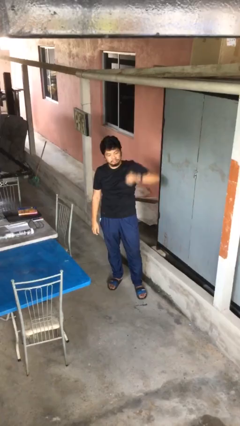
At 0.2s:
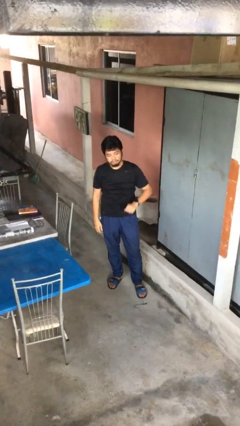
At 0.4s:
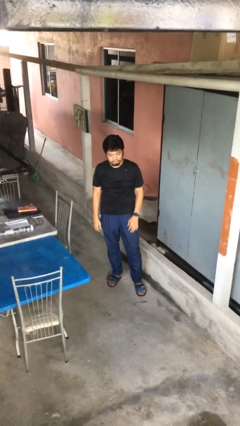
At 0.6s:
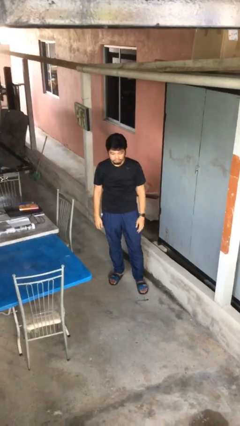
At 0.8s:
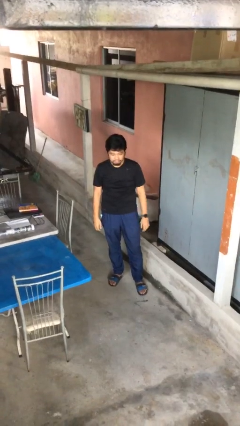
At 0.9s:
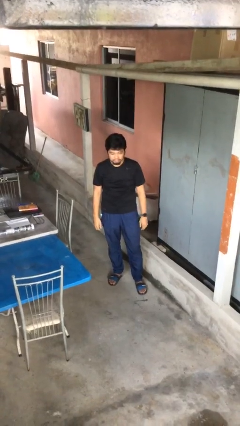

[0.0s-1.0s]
person gestures lower hand

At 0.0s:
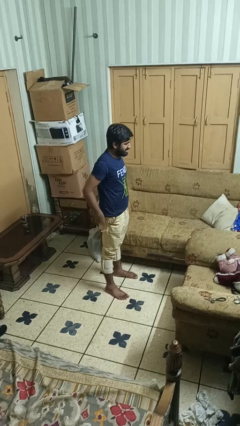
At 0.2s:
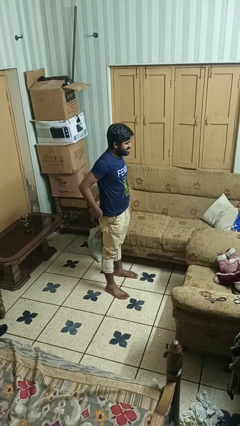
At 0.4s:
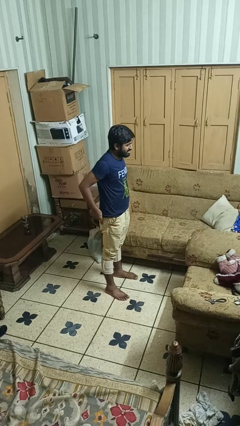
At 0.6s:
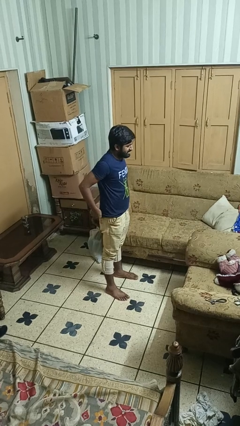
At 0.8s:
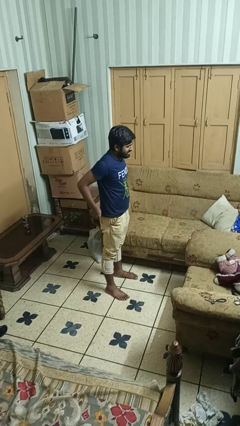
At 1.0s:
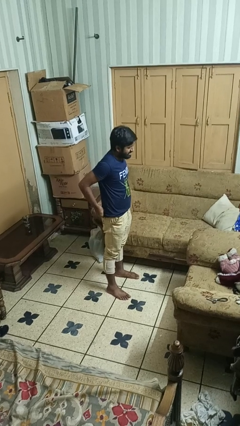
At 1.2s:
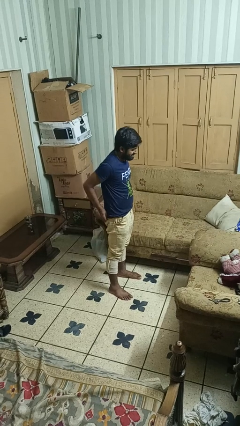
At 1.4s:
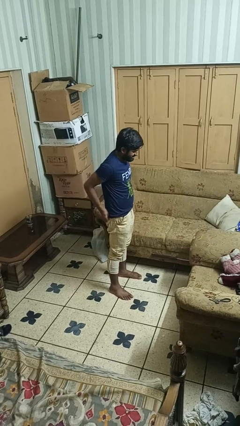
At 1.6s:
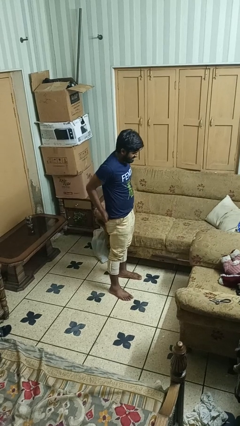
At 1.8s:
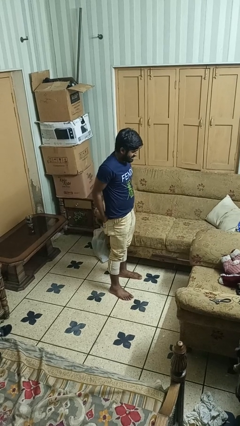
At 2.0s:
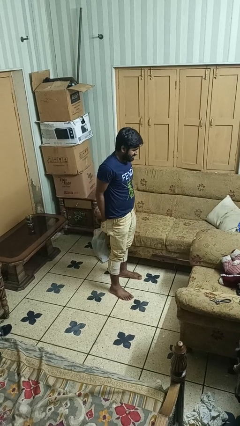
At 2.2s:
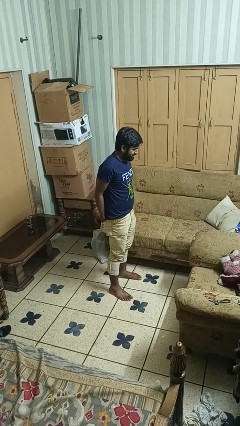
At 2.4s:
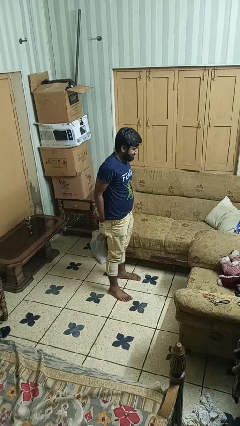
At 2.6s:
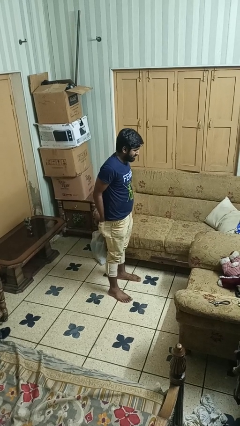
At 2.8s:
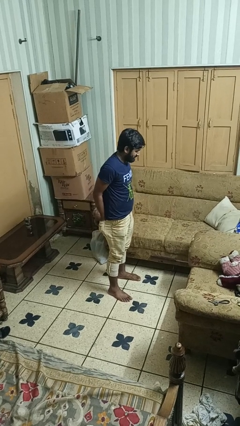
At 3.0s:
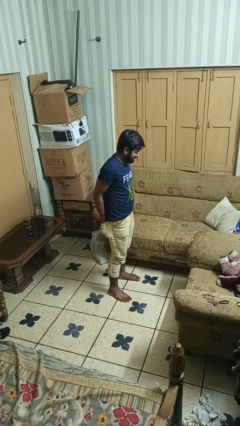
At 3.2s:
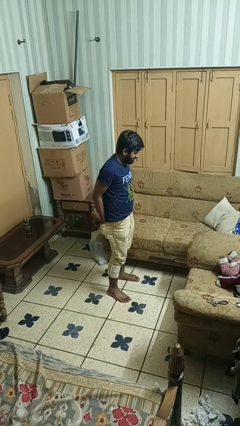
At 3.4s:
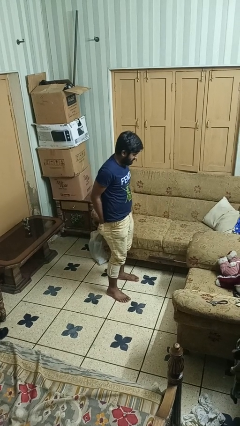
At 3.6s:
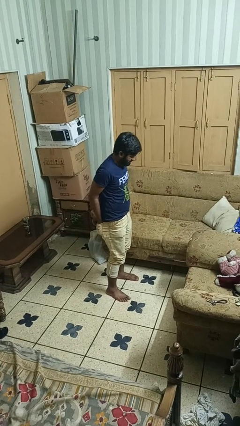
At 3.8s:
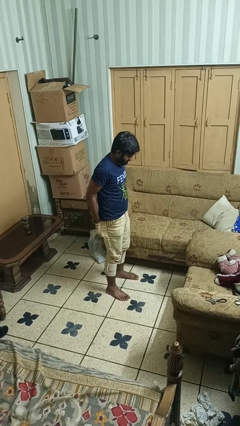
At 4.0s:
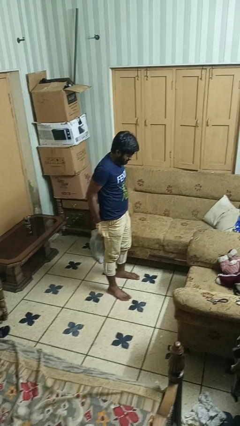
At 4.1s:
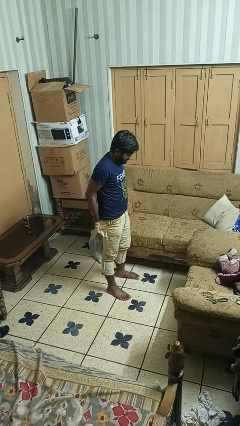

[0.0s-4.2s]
person puts hands in back pockets

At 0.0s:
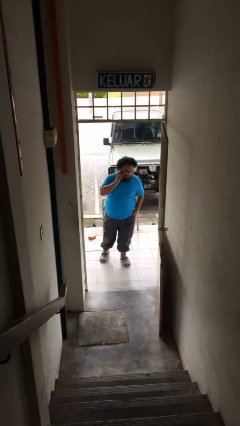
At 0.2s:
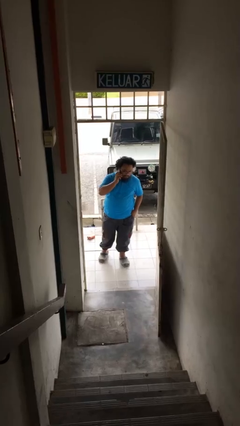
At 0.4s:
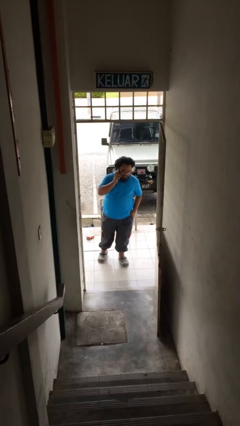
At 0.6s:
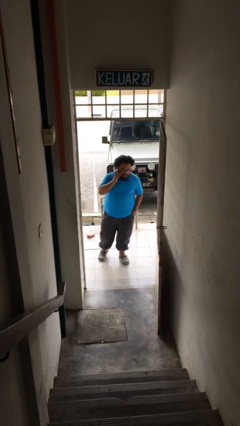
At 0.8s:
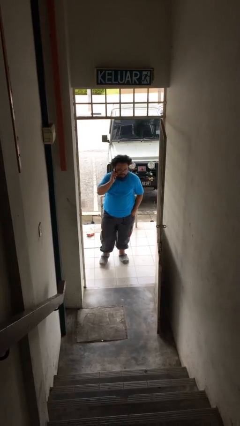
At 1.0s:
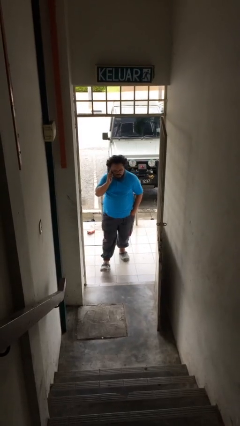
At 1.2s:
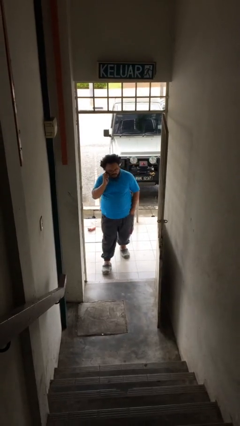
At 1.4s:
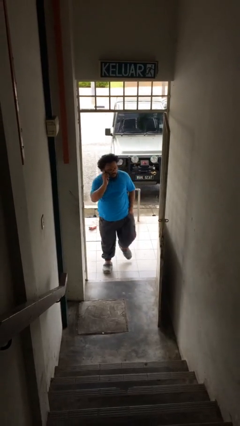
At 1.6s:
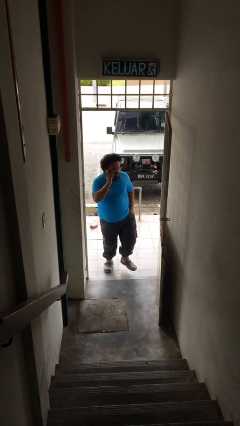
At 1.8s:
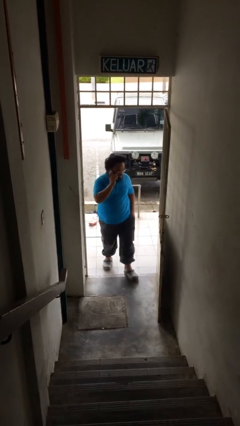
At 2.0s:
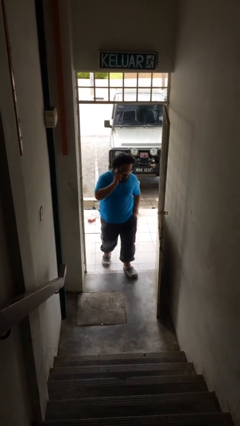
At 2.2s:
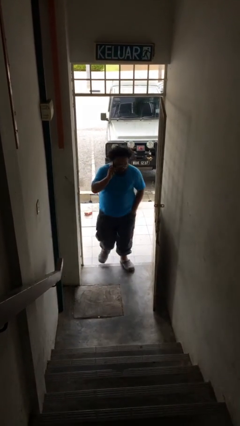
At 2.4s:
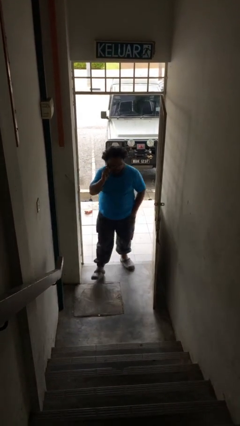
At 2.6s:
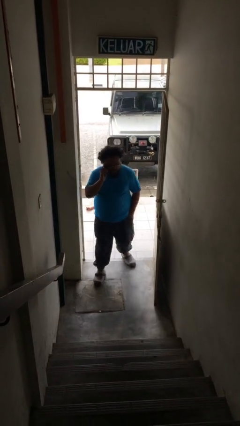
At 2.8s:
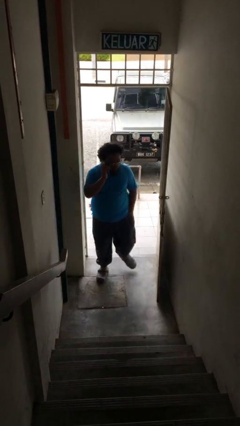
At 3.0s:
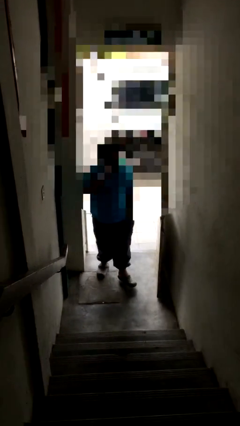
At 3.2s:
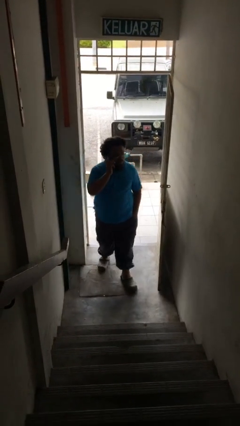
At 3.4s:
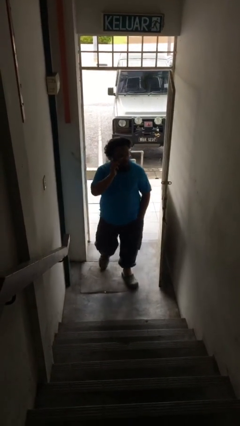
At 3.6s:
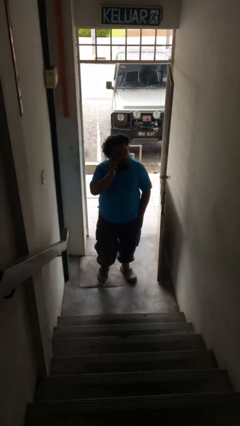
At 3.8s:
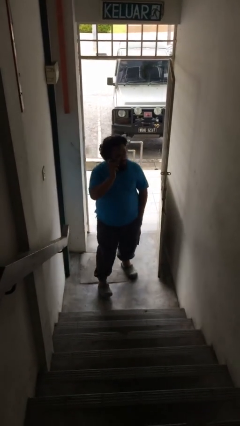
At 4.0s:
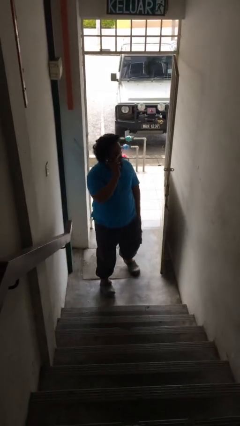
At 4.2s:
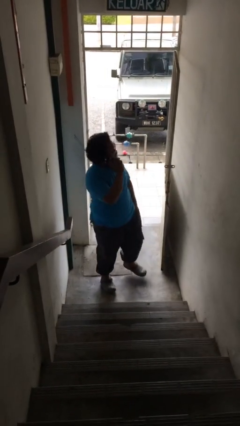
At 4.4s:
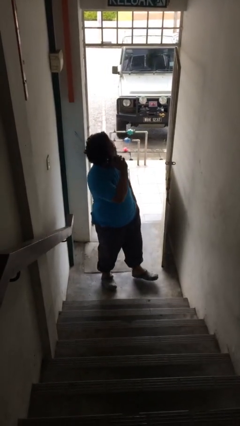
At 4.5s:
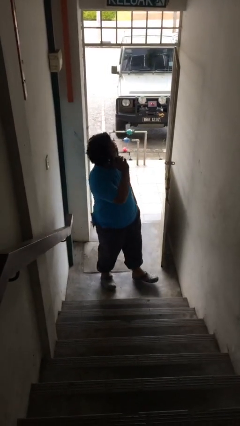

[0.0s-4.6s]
person enters scene through structure

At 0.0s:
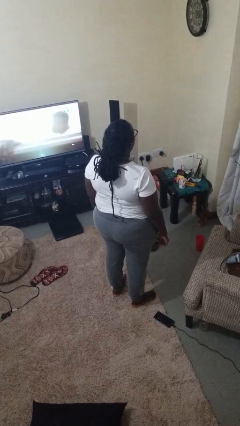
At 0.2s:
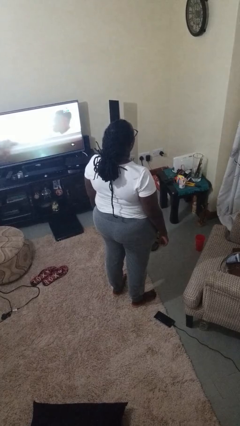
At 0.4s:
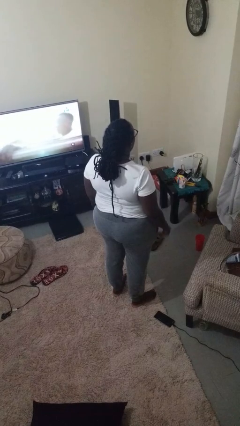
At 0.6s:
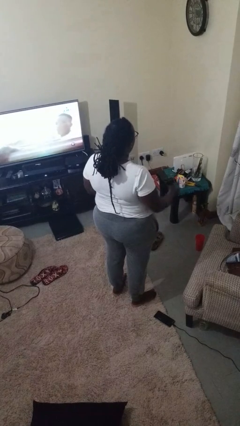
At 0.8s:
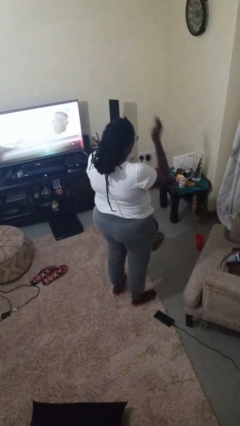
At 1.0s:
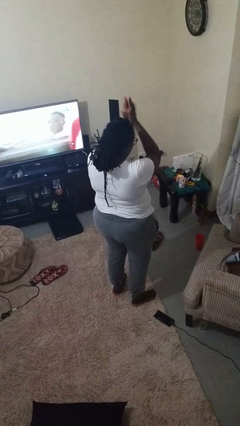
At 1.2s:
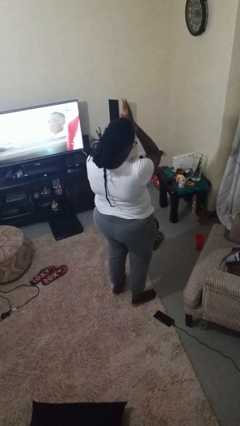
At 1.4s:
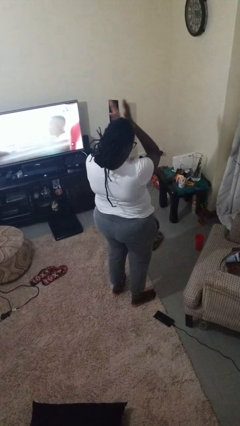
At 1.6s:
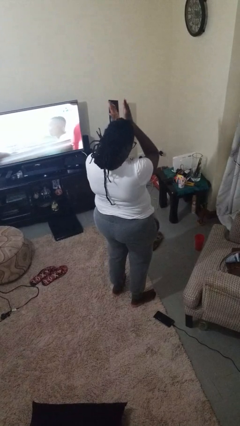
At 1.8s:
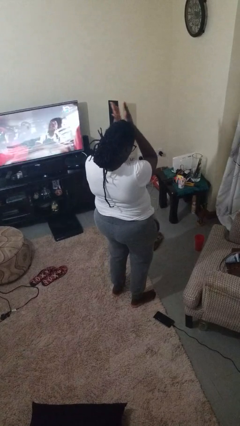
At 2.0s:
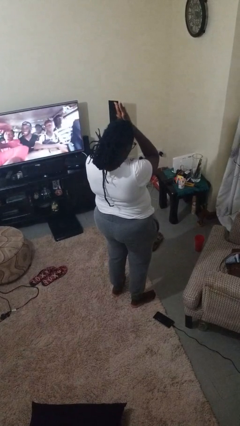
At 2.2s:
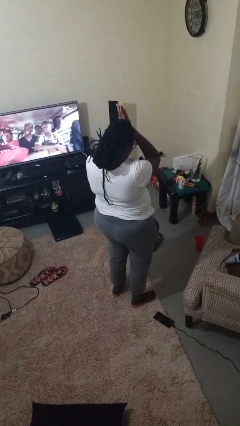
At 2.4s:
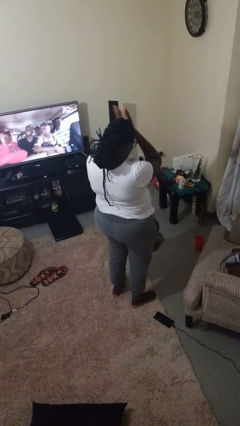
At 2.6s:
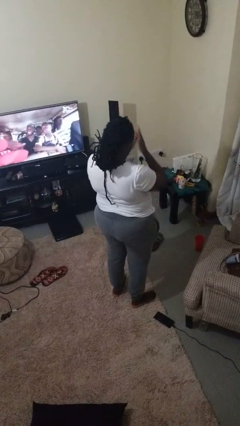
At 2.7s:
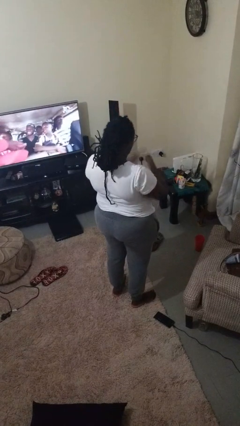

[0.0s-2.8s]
person claps hands

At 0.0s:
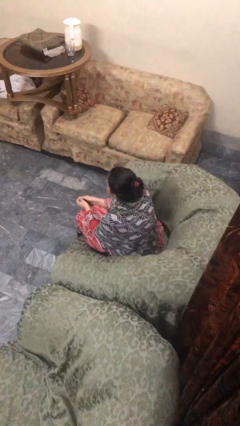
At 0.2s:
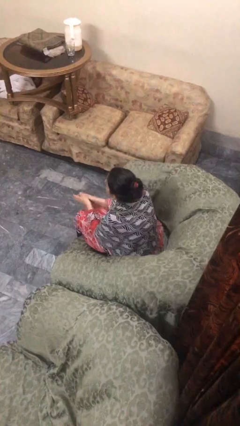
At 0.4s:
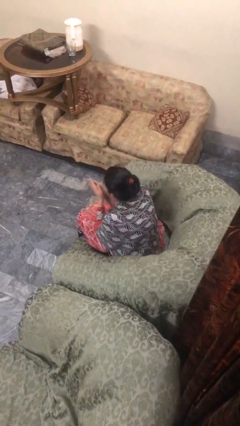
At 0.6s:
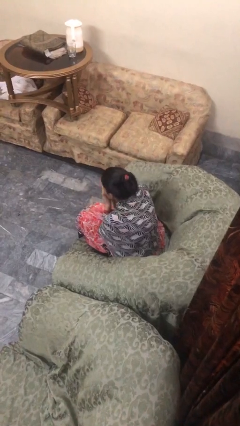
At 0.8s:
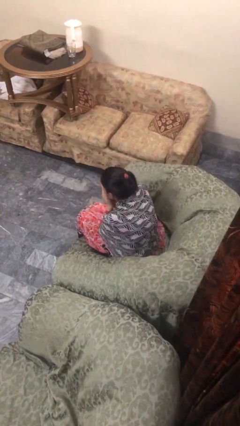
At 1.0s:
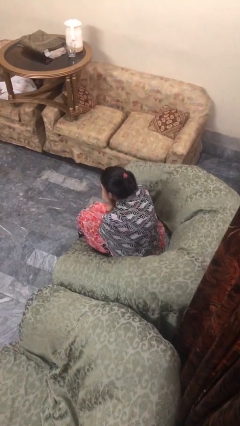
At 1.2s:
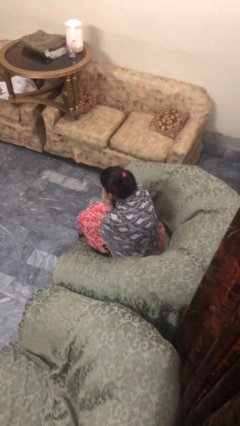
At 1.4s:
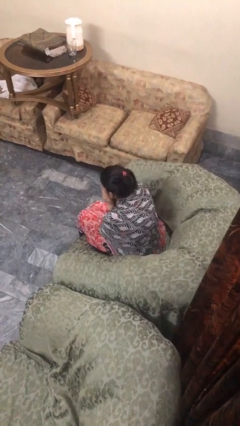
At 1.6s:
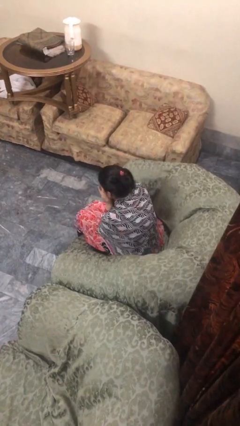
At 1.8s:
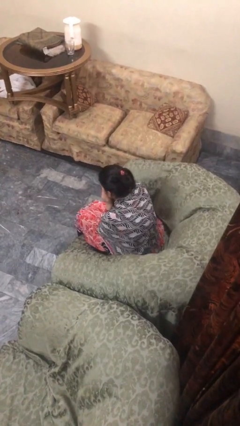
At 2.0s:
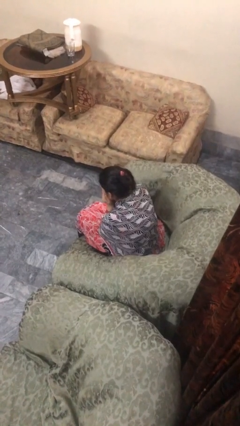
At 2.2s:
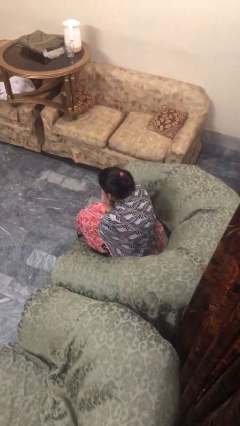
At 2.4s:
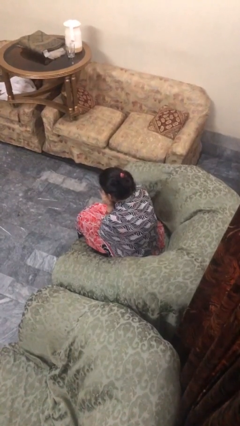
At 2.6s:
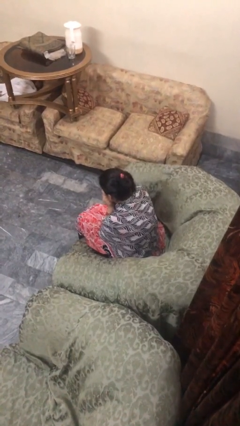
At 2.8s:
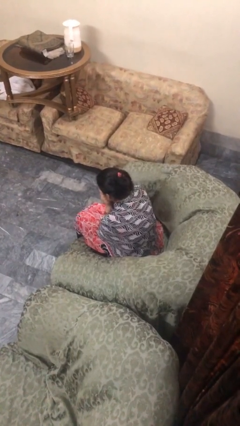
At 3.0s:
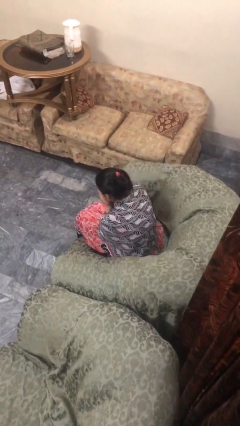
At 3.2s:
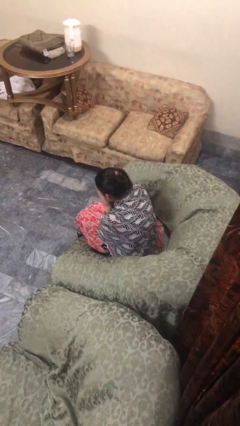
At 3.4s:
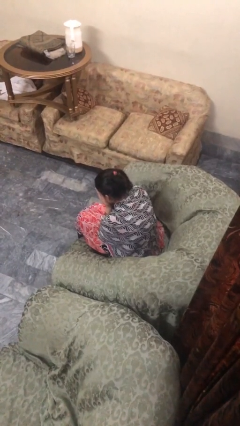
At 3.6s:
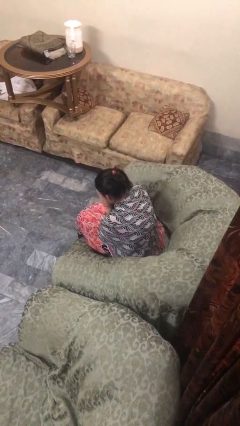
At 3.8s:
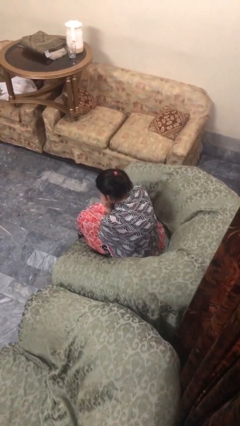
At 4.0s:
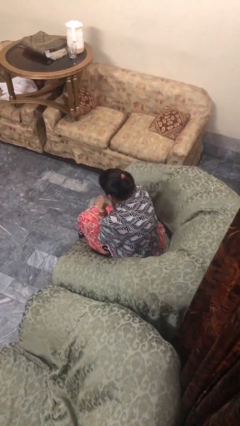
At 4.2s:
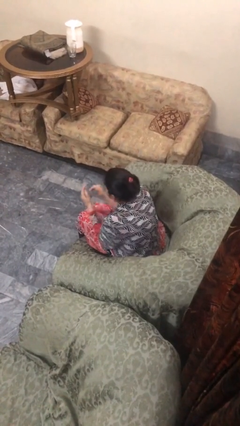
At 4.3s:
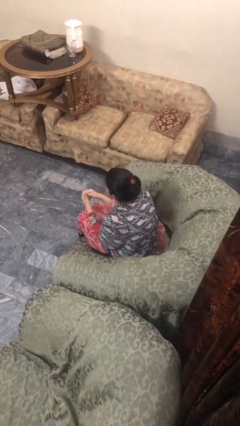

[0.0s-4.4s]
person rubs eyes

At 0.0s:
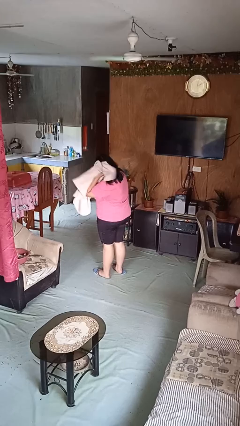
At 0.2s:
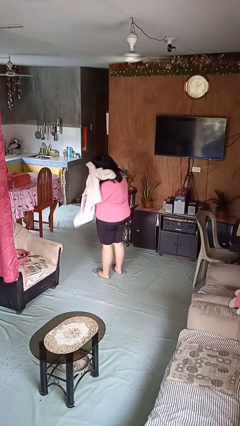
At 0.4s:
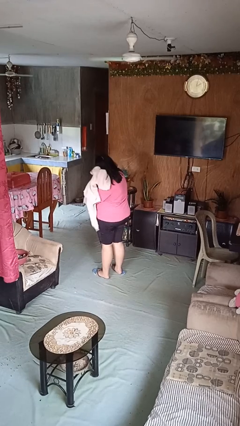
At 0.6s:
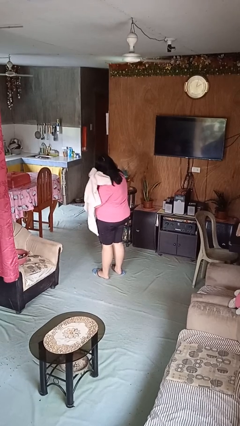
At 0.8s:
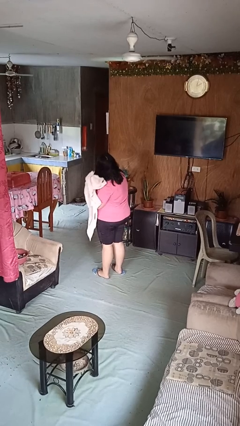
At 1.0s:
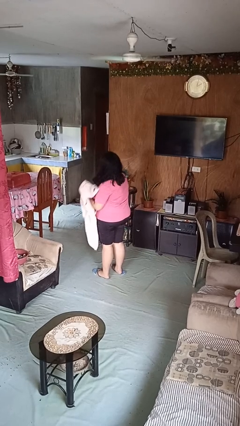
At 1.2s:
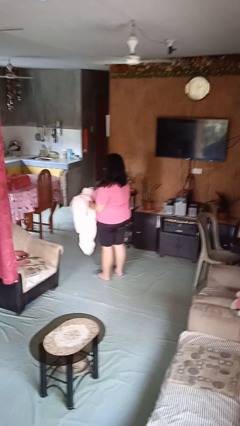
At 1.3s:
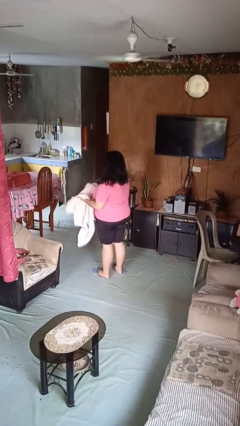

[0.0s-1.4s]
person dries hair with towel
